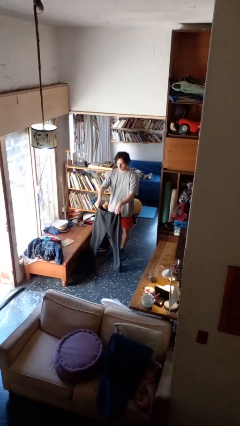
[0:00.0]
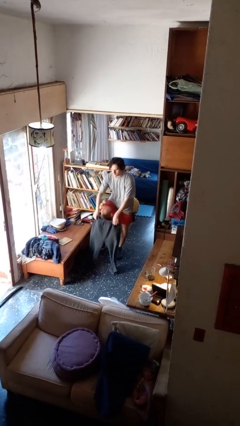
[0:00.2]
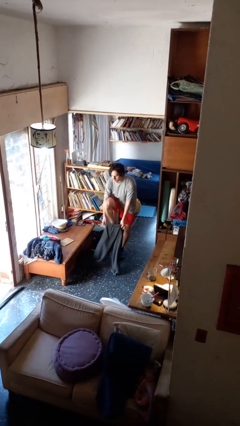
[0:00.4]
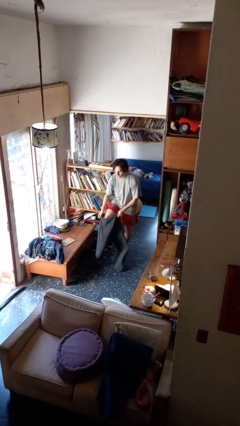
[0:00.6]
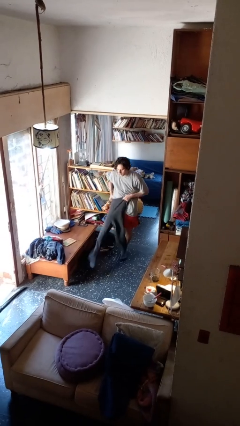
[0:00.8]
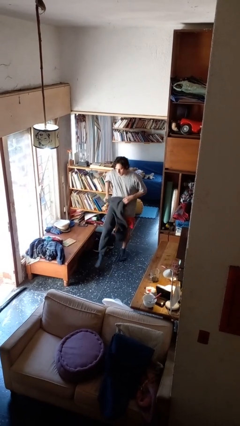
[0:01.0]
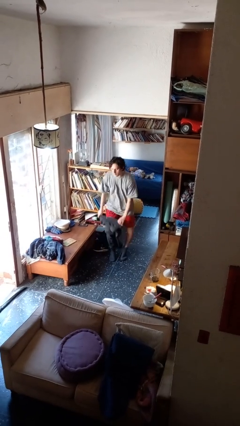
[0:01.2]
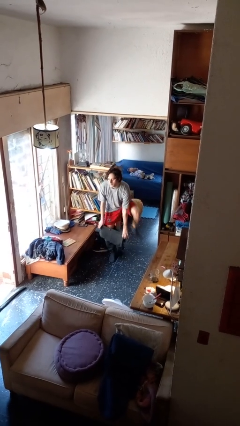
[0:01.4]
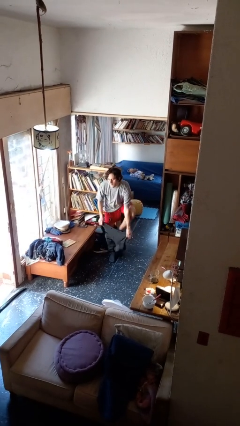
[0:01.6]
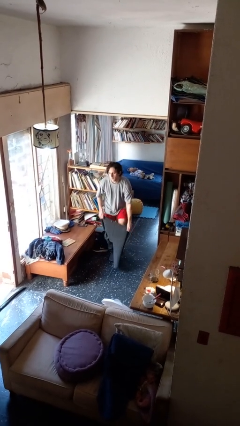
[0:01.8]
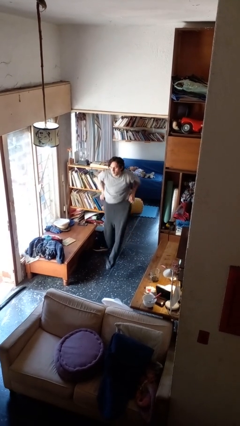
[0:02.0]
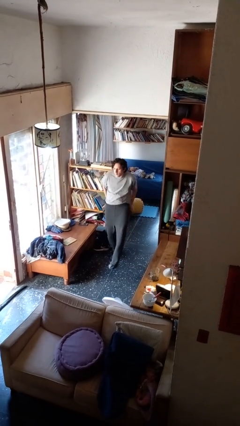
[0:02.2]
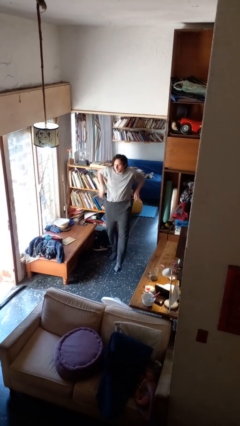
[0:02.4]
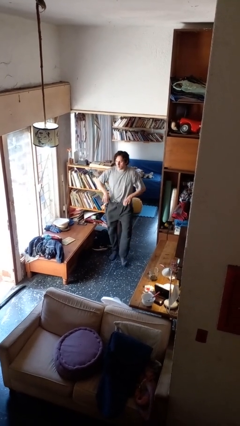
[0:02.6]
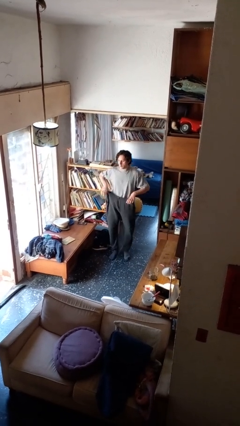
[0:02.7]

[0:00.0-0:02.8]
person puts on pants

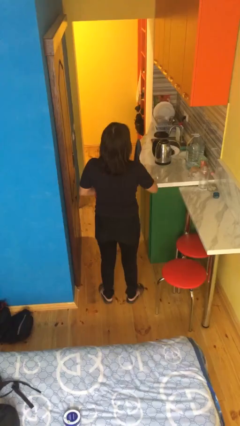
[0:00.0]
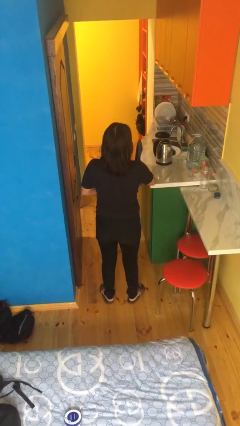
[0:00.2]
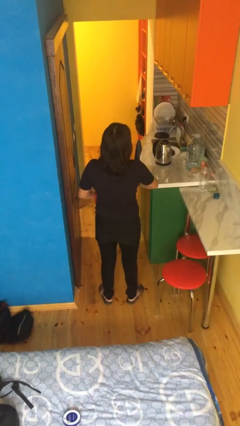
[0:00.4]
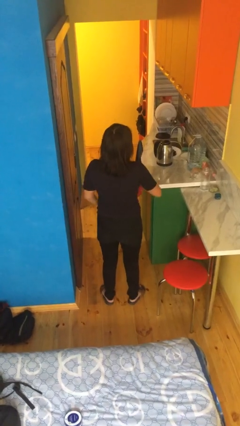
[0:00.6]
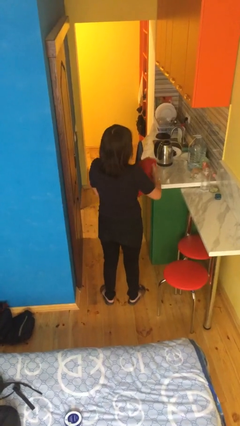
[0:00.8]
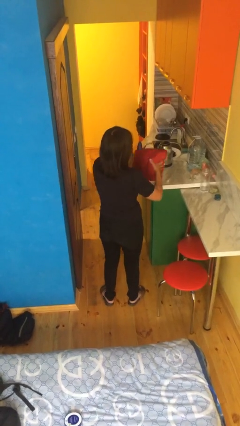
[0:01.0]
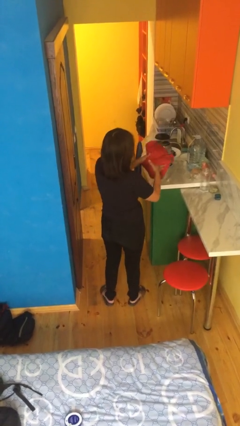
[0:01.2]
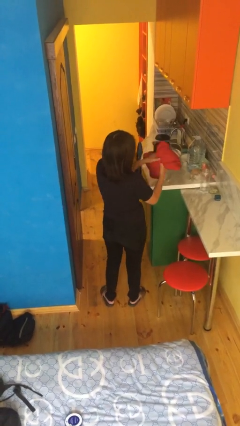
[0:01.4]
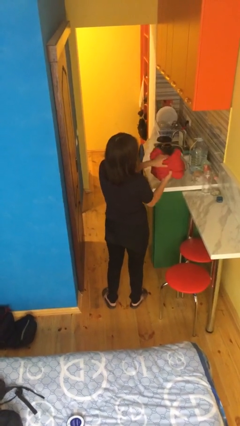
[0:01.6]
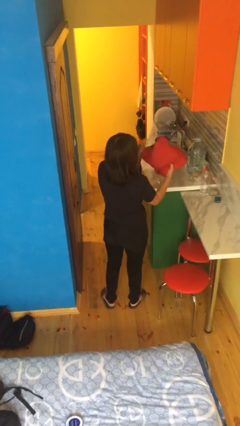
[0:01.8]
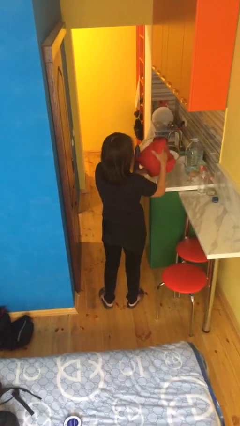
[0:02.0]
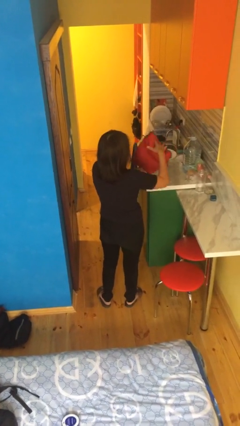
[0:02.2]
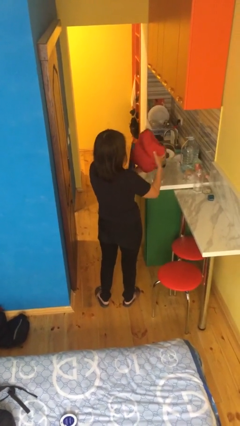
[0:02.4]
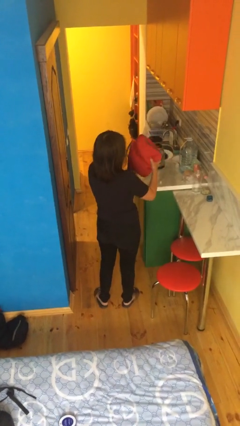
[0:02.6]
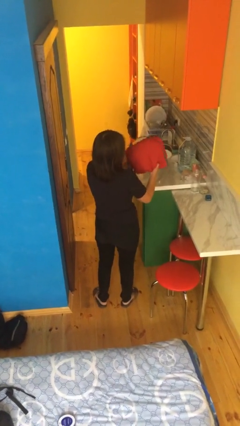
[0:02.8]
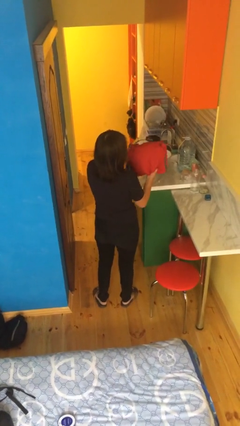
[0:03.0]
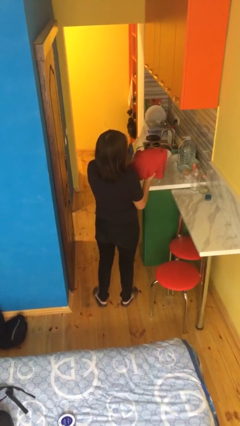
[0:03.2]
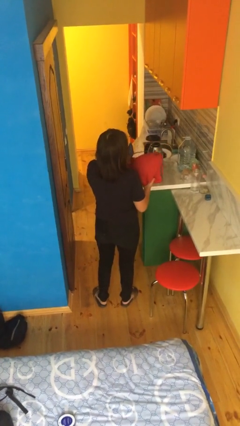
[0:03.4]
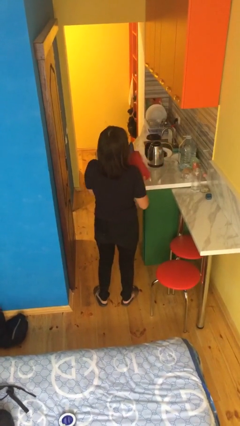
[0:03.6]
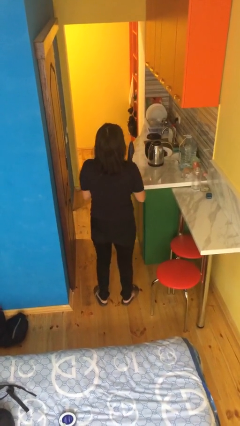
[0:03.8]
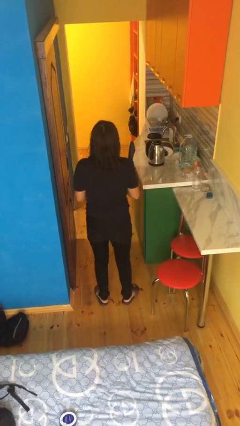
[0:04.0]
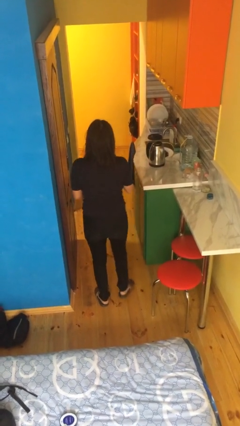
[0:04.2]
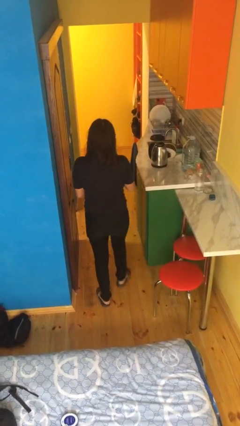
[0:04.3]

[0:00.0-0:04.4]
person squeezes object

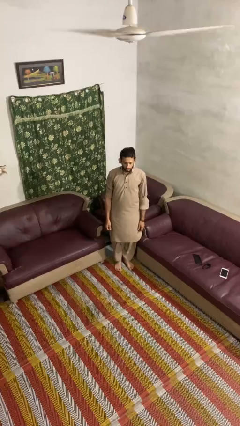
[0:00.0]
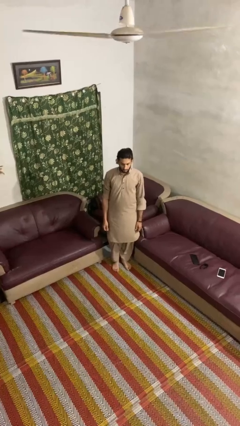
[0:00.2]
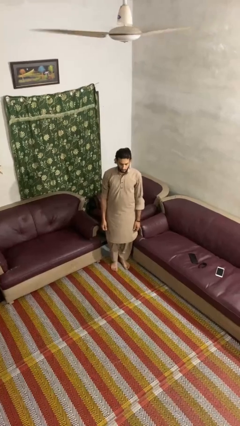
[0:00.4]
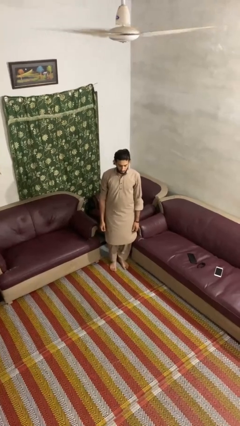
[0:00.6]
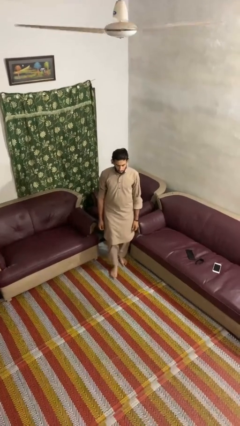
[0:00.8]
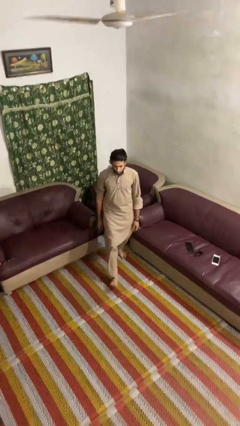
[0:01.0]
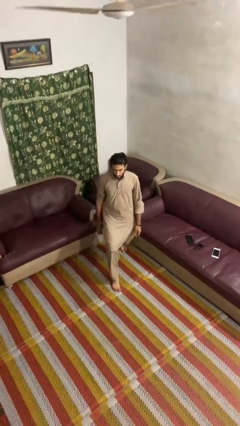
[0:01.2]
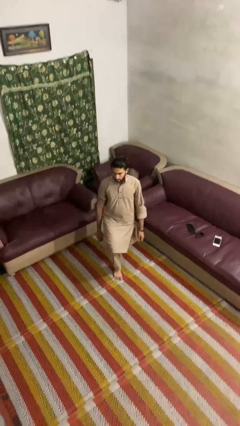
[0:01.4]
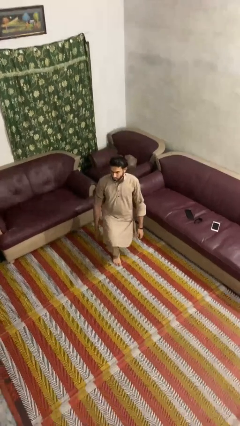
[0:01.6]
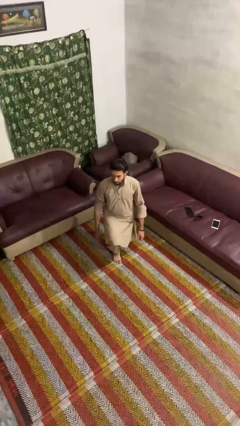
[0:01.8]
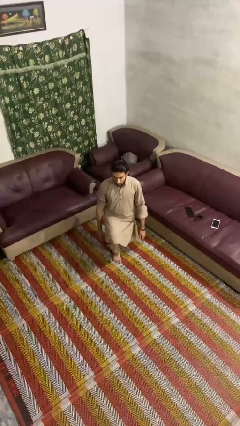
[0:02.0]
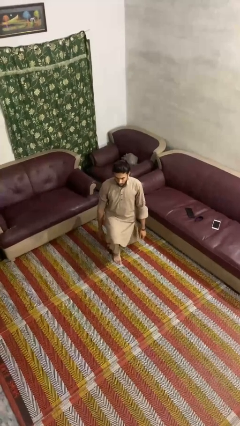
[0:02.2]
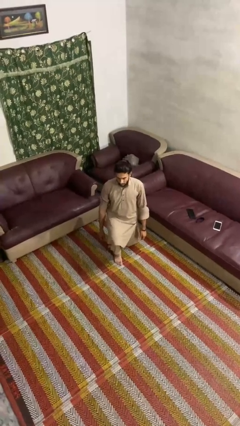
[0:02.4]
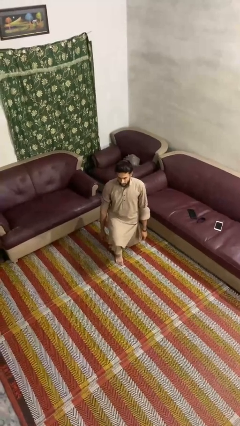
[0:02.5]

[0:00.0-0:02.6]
person kneels

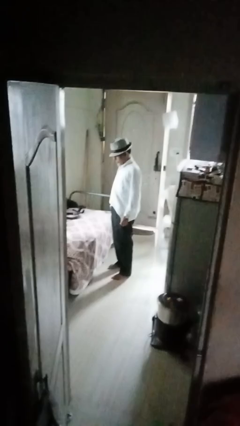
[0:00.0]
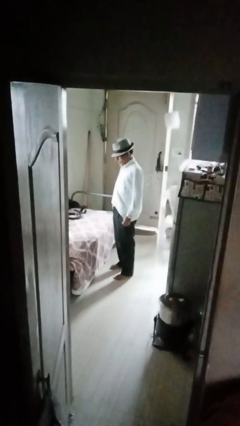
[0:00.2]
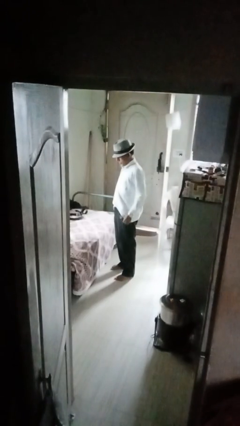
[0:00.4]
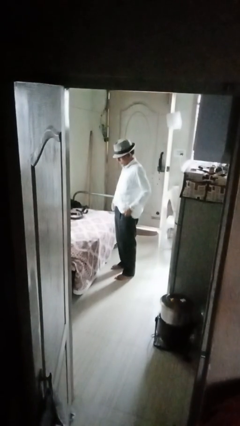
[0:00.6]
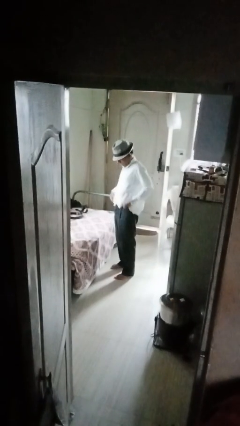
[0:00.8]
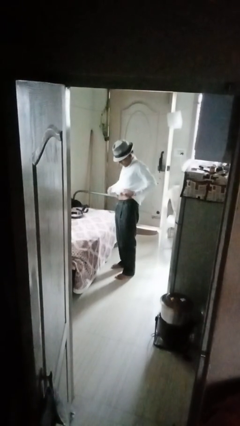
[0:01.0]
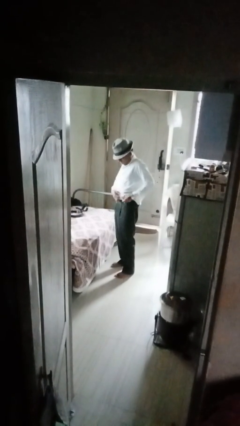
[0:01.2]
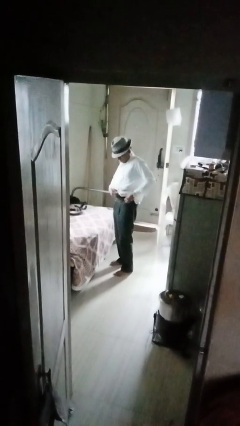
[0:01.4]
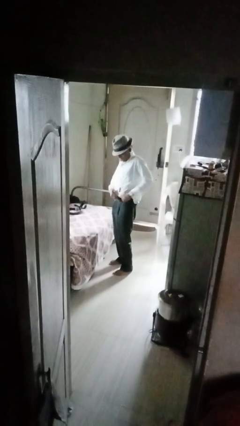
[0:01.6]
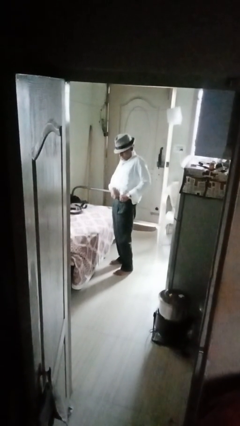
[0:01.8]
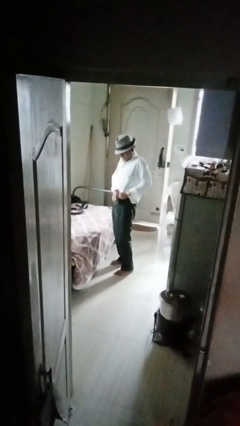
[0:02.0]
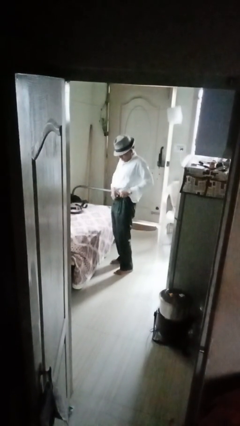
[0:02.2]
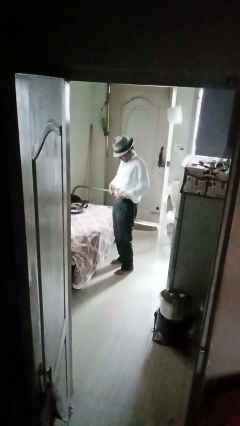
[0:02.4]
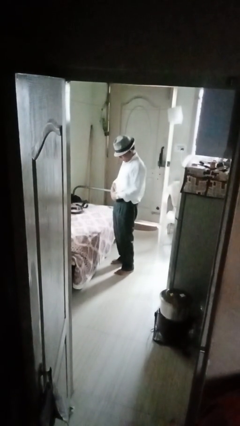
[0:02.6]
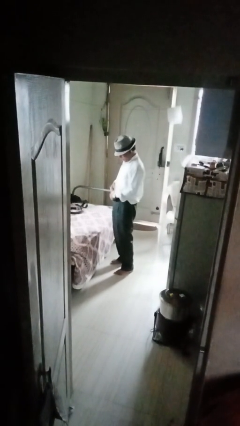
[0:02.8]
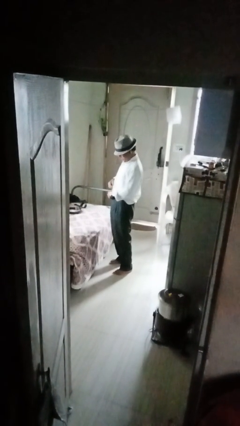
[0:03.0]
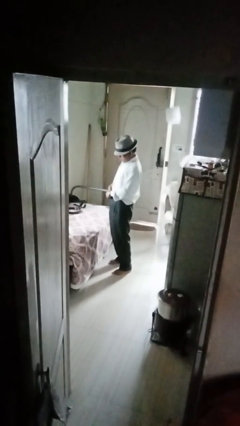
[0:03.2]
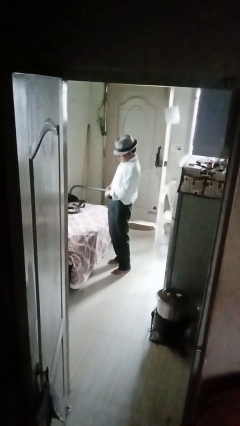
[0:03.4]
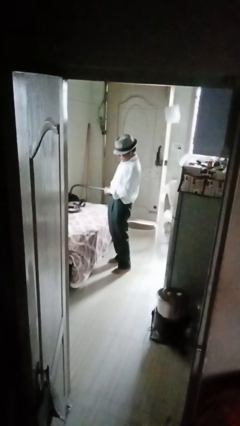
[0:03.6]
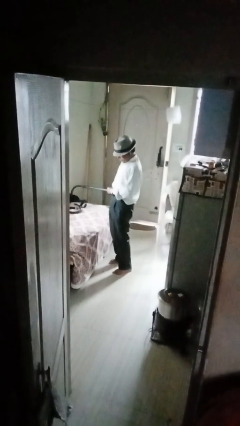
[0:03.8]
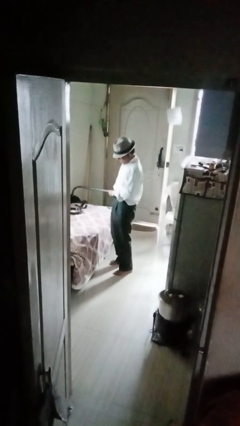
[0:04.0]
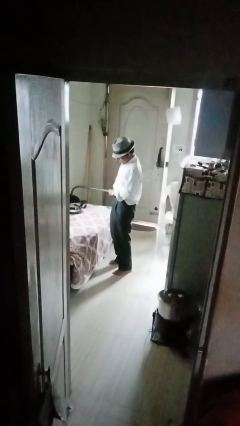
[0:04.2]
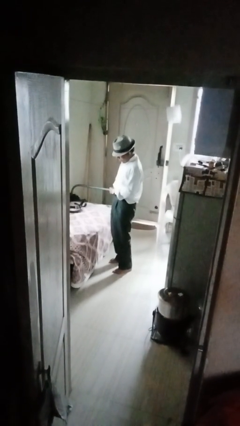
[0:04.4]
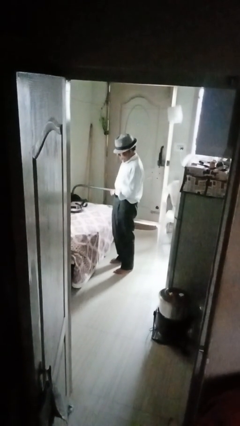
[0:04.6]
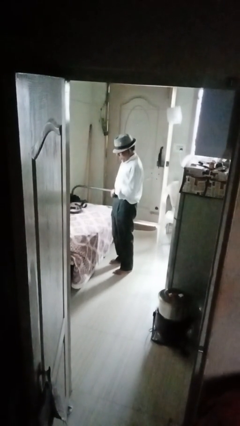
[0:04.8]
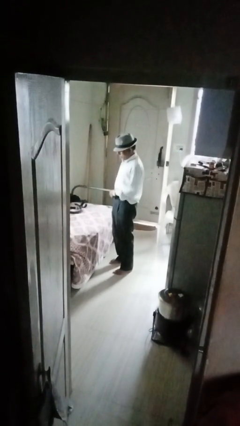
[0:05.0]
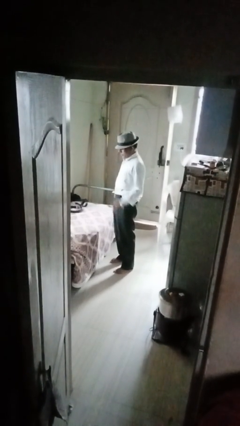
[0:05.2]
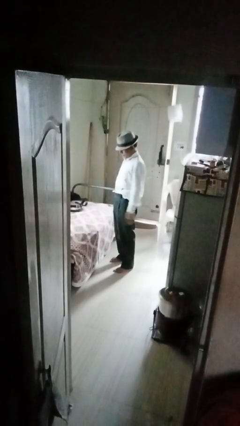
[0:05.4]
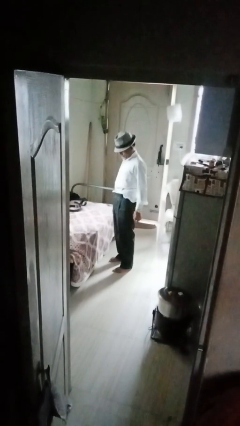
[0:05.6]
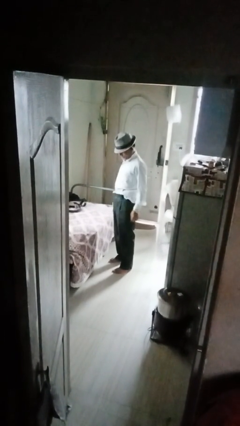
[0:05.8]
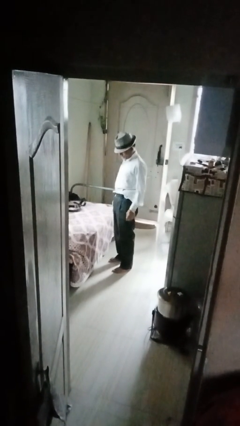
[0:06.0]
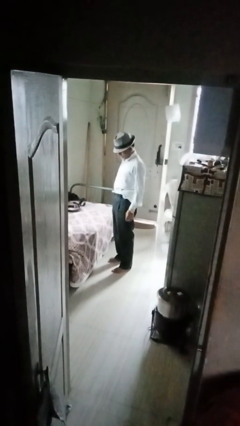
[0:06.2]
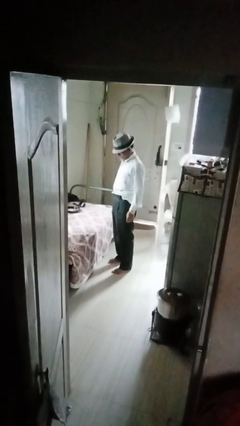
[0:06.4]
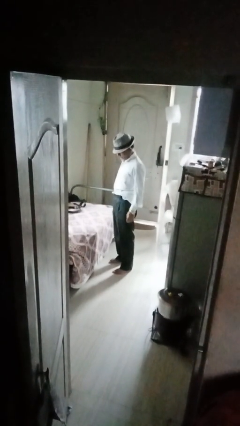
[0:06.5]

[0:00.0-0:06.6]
person tucks in shirt

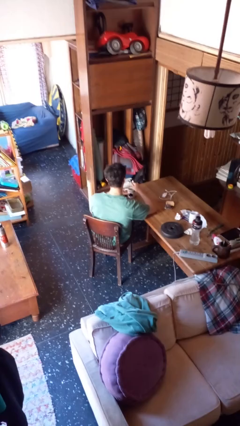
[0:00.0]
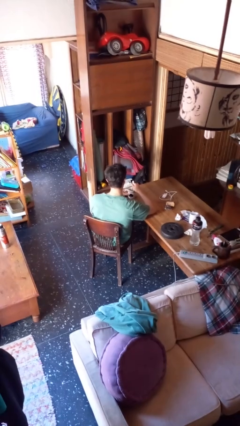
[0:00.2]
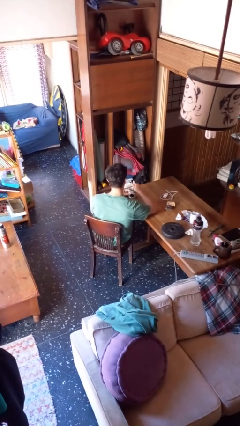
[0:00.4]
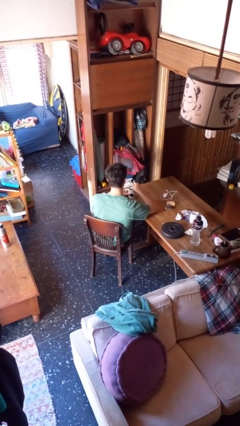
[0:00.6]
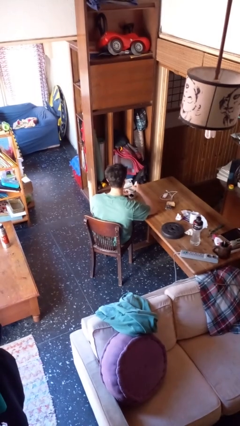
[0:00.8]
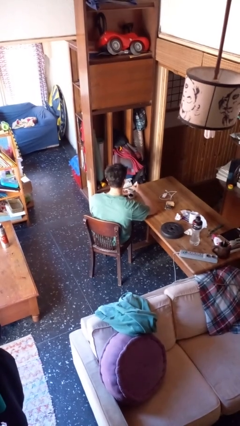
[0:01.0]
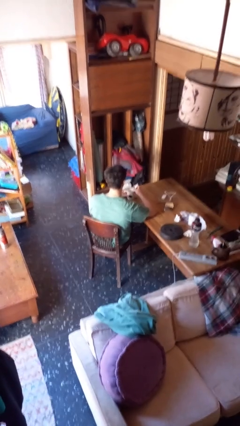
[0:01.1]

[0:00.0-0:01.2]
person stirs mug

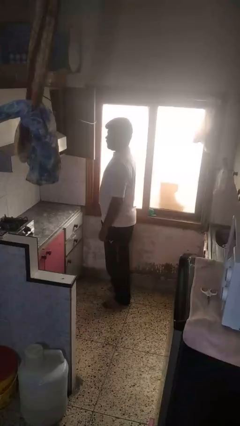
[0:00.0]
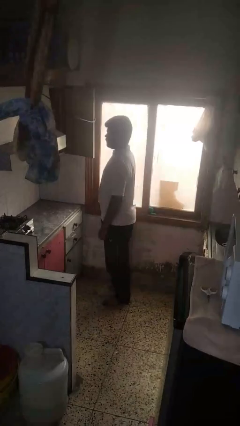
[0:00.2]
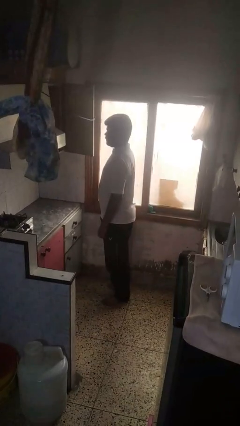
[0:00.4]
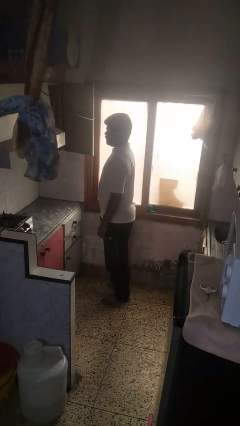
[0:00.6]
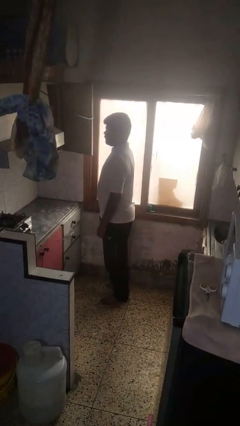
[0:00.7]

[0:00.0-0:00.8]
person picks up object from cabinet
